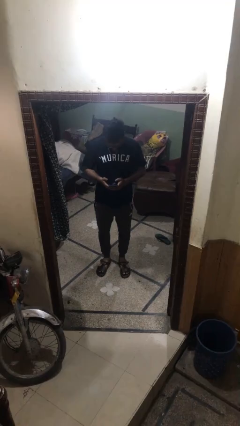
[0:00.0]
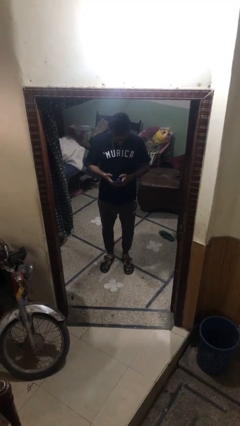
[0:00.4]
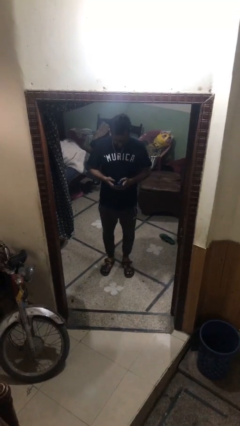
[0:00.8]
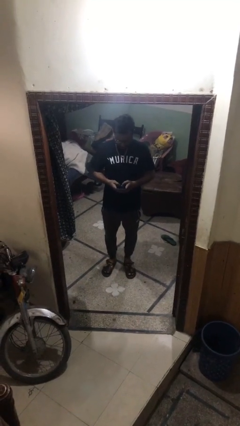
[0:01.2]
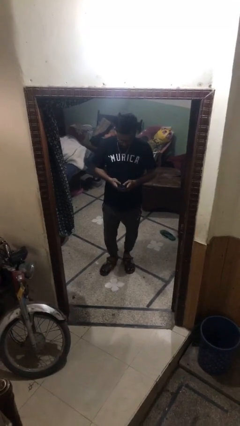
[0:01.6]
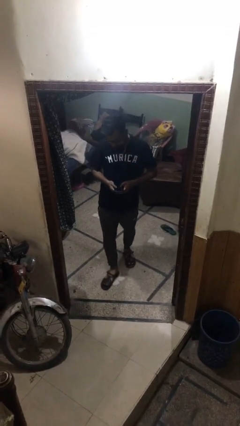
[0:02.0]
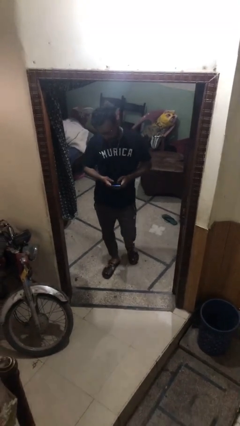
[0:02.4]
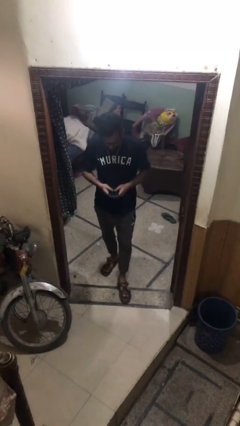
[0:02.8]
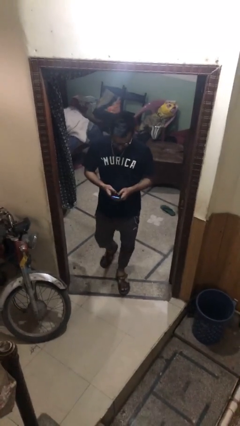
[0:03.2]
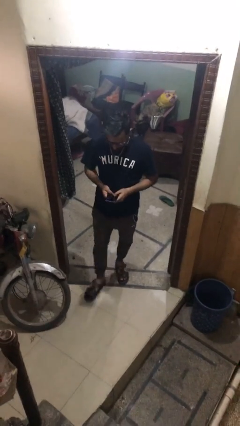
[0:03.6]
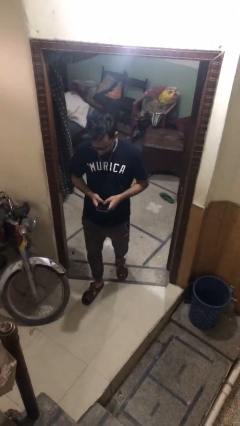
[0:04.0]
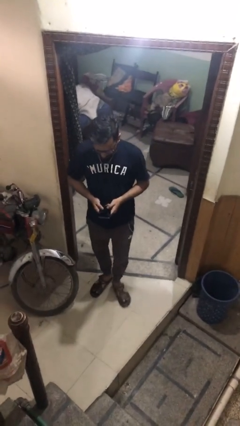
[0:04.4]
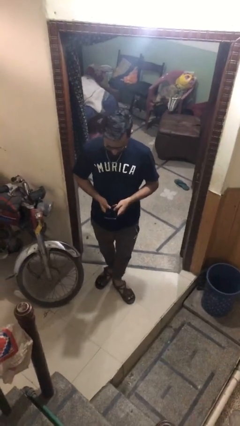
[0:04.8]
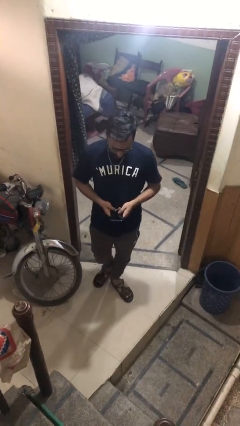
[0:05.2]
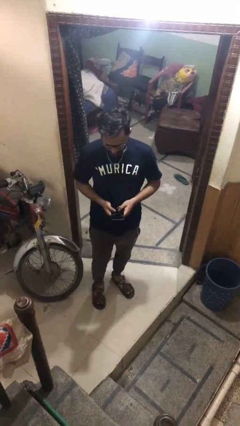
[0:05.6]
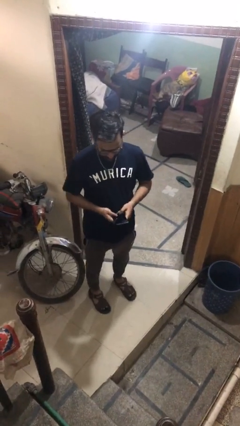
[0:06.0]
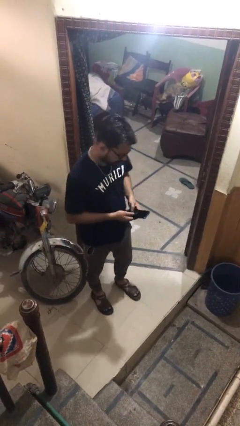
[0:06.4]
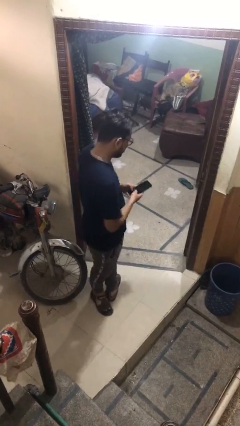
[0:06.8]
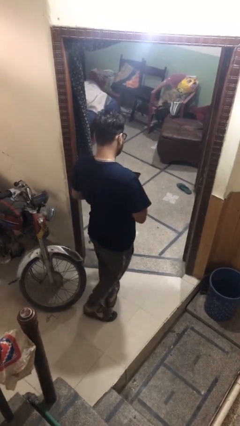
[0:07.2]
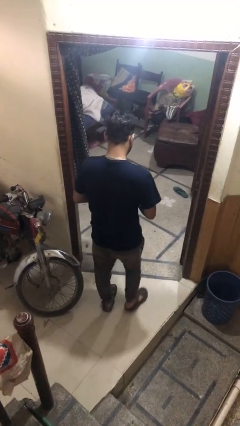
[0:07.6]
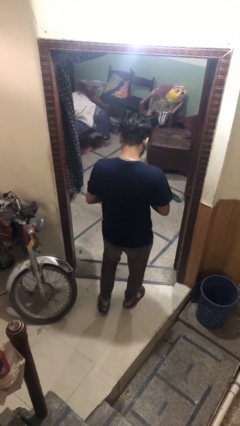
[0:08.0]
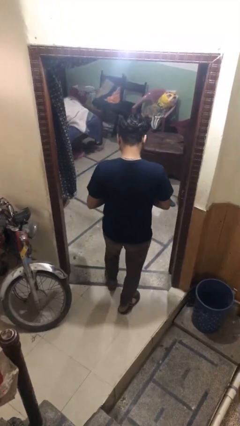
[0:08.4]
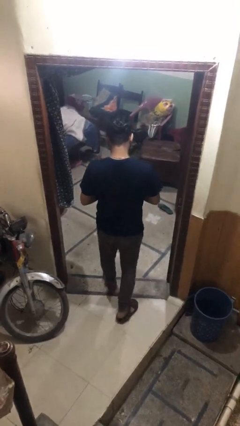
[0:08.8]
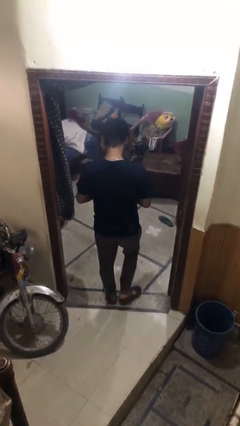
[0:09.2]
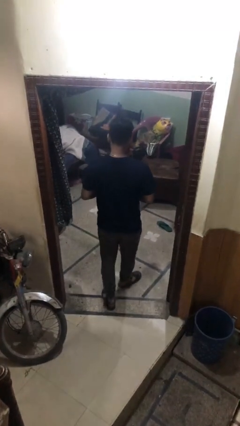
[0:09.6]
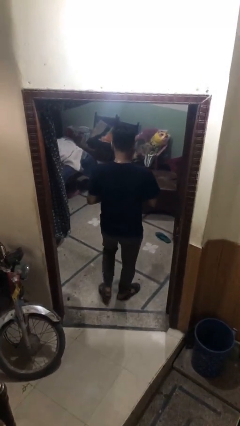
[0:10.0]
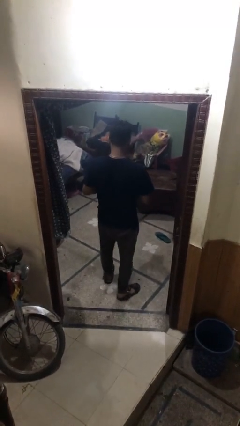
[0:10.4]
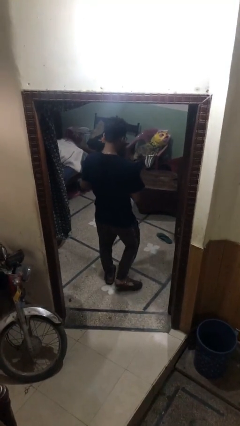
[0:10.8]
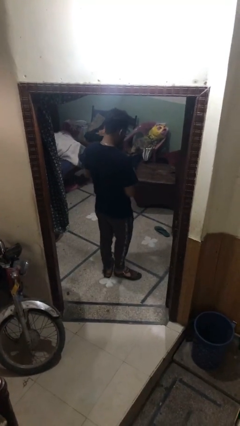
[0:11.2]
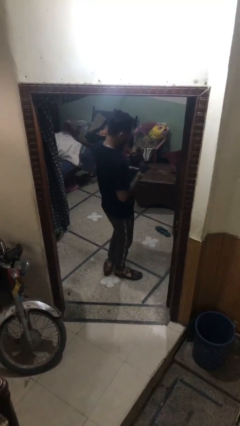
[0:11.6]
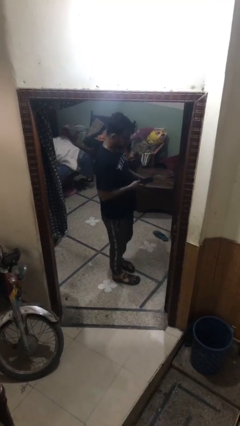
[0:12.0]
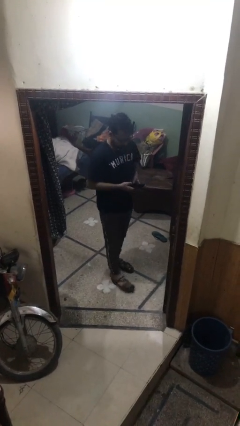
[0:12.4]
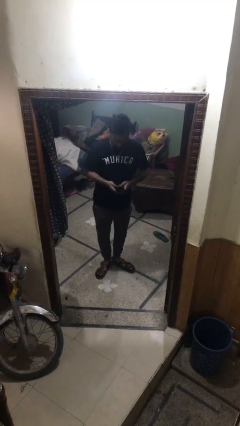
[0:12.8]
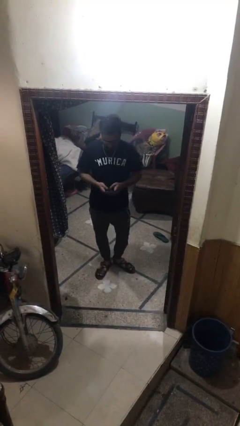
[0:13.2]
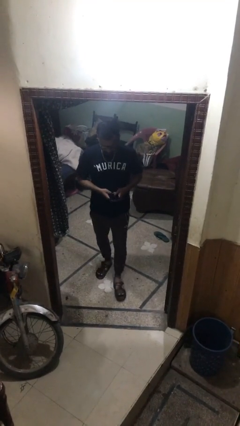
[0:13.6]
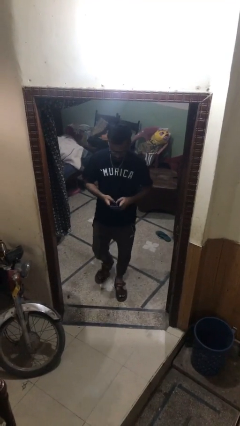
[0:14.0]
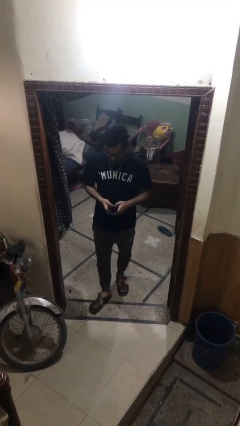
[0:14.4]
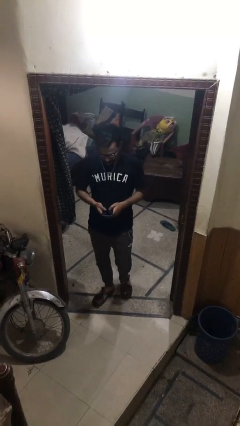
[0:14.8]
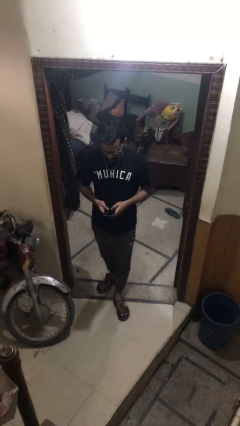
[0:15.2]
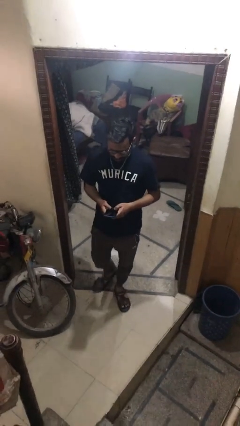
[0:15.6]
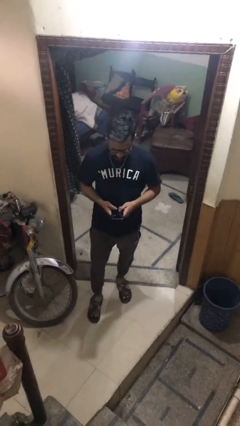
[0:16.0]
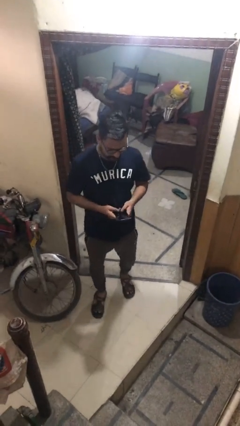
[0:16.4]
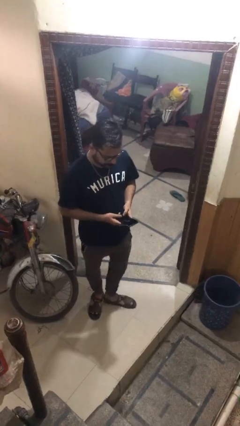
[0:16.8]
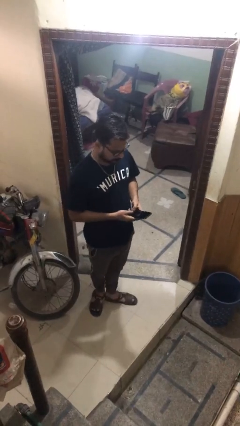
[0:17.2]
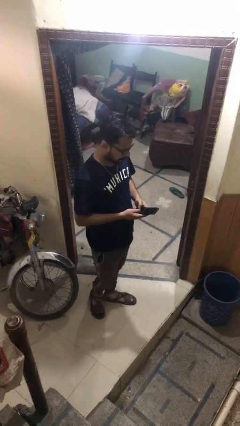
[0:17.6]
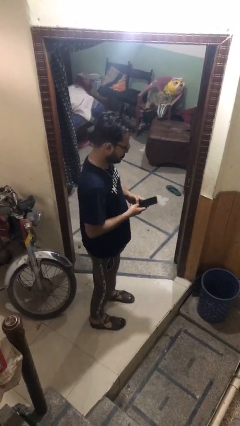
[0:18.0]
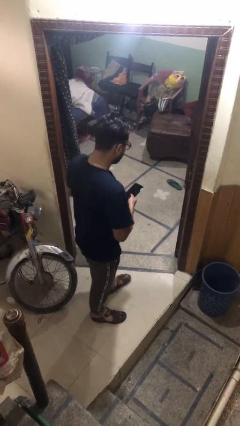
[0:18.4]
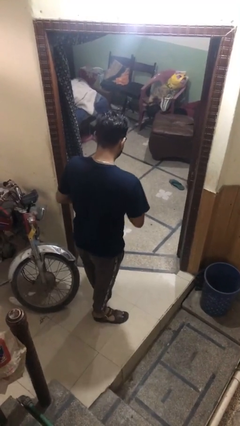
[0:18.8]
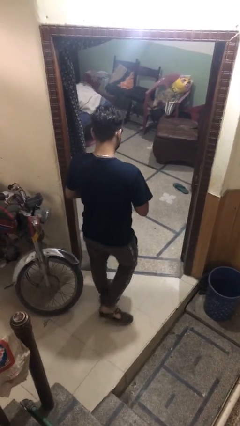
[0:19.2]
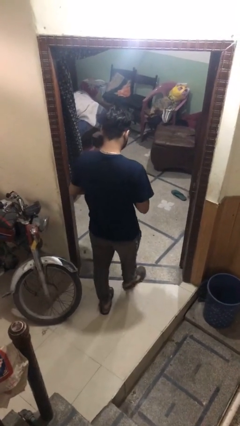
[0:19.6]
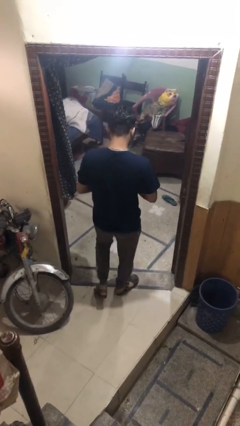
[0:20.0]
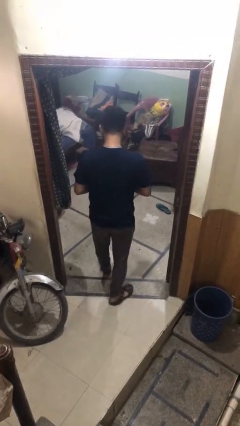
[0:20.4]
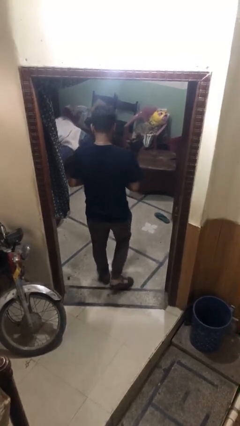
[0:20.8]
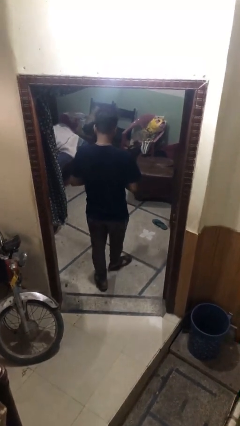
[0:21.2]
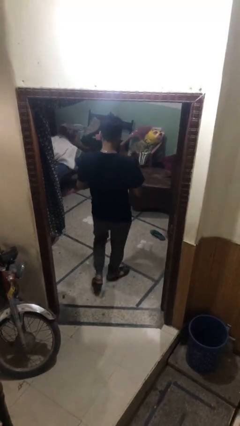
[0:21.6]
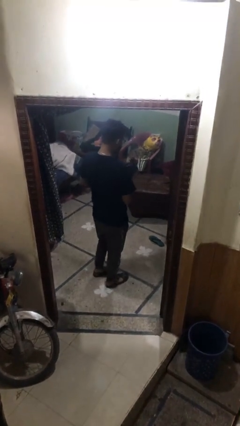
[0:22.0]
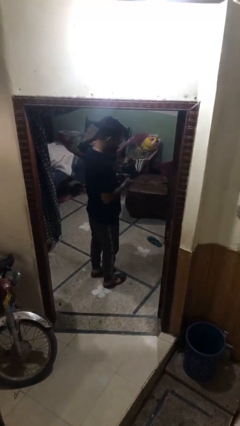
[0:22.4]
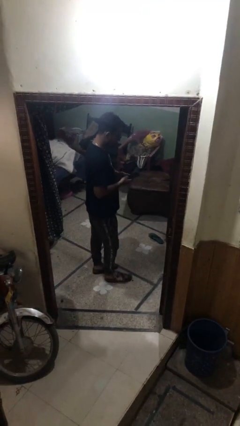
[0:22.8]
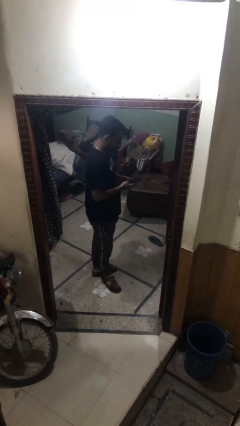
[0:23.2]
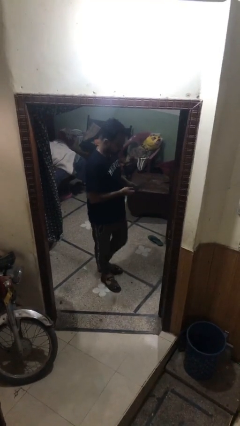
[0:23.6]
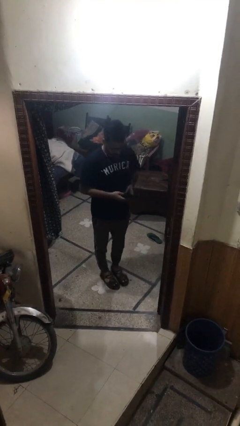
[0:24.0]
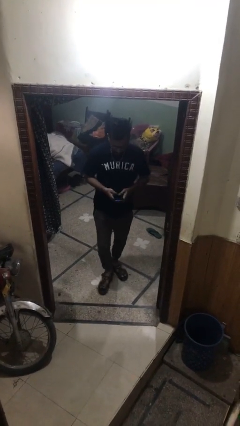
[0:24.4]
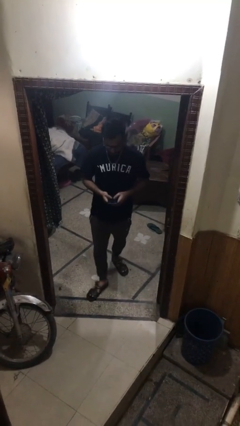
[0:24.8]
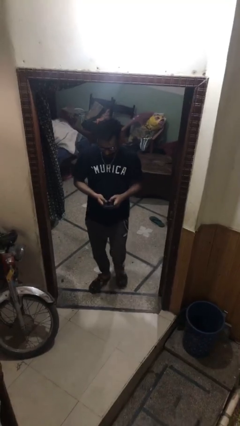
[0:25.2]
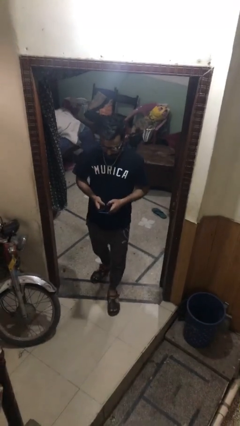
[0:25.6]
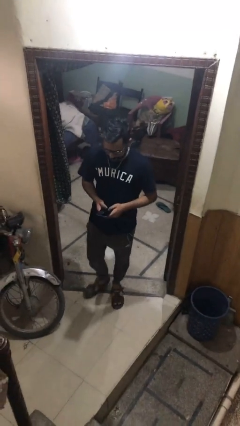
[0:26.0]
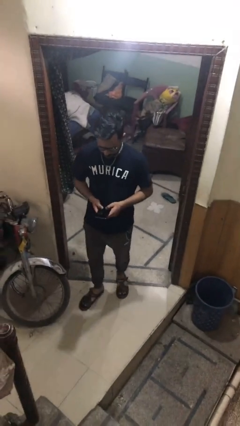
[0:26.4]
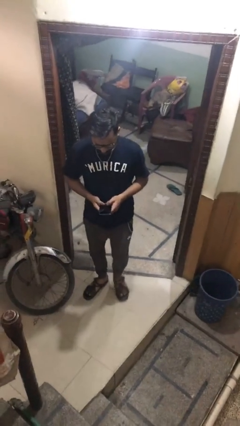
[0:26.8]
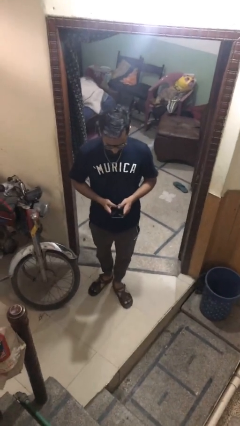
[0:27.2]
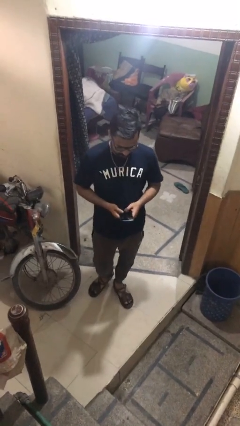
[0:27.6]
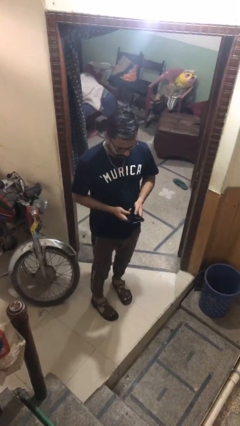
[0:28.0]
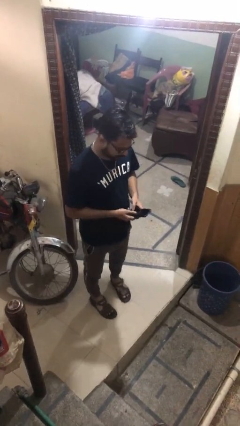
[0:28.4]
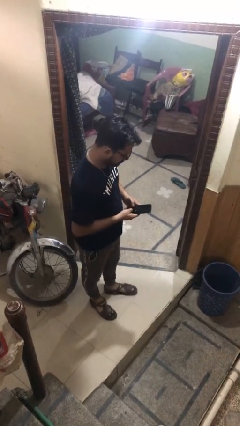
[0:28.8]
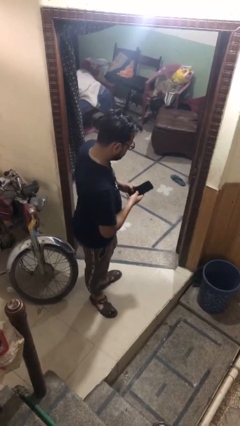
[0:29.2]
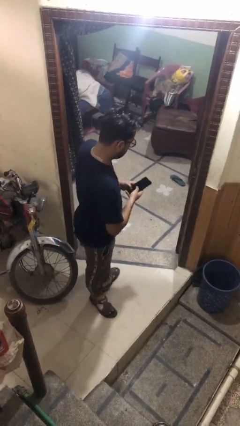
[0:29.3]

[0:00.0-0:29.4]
person texts on phone

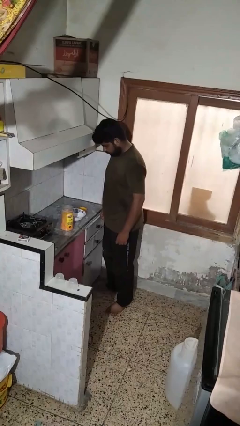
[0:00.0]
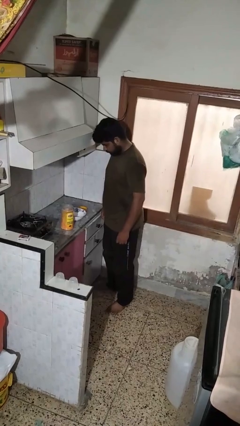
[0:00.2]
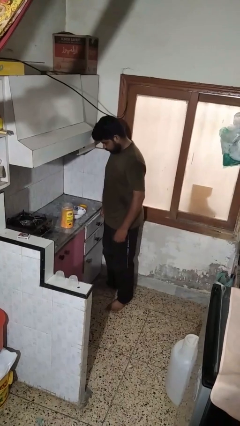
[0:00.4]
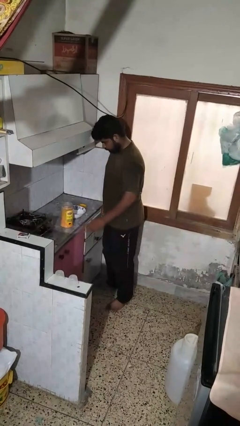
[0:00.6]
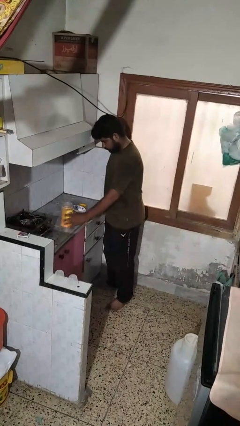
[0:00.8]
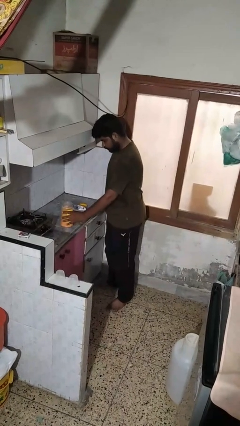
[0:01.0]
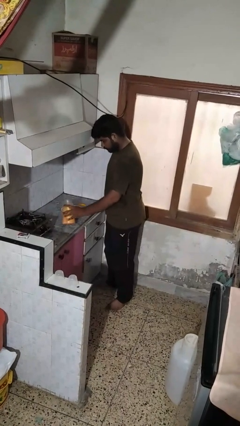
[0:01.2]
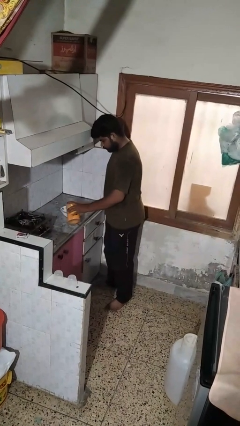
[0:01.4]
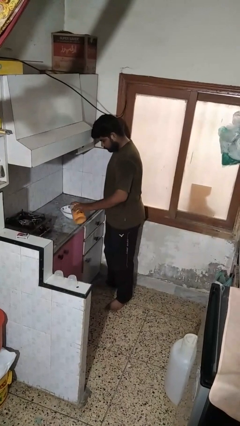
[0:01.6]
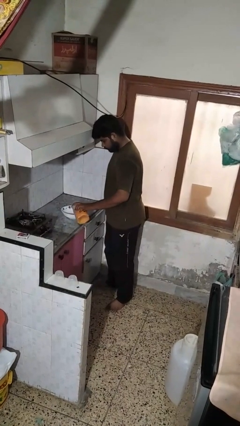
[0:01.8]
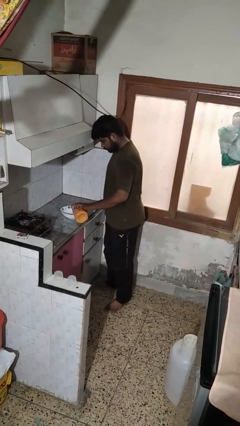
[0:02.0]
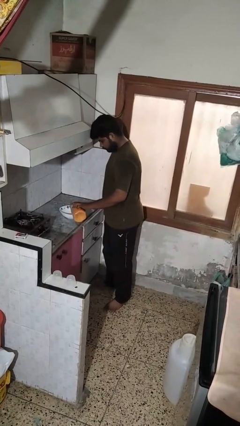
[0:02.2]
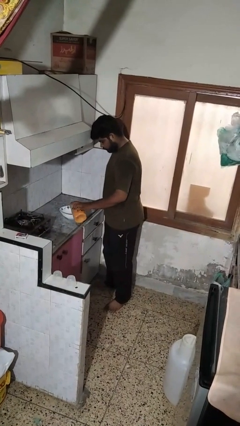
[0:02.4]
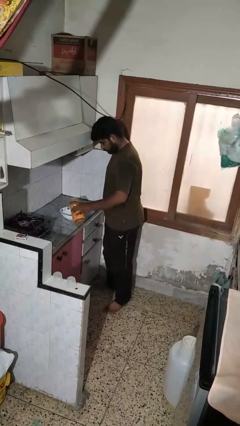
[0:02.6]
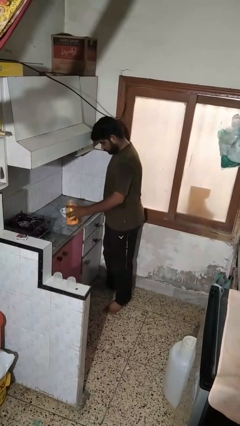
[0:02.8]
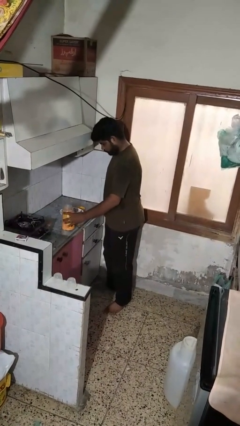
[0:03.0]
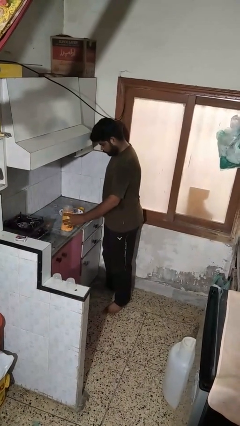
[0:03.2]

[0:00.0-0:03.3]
person pours into bowl
